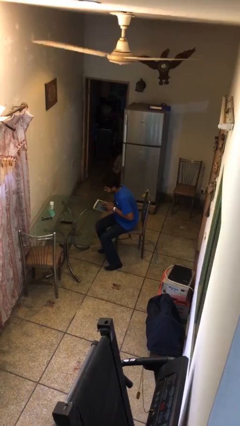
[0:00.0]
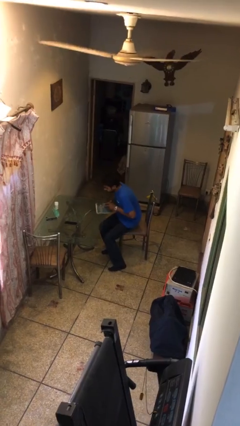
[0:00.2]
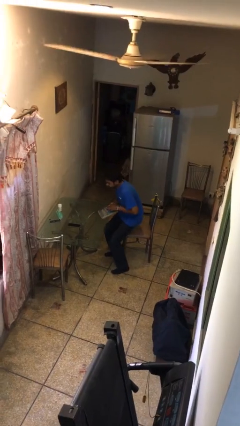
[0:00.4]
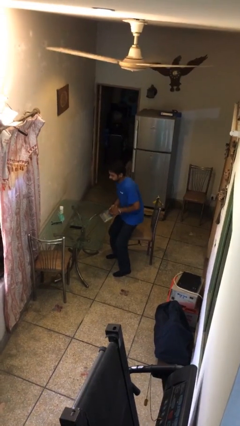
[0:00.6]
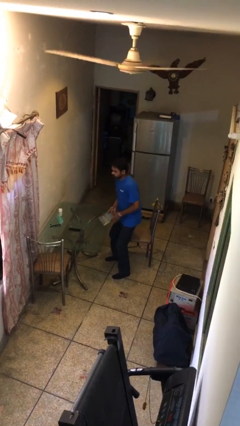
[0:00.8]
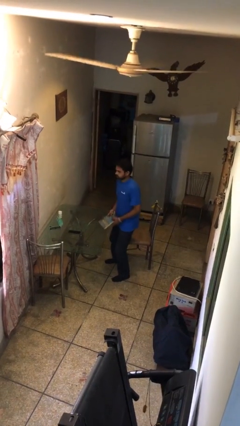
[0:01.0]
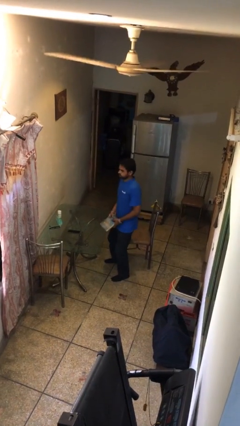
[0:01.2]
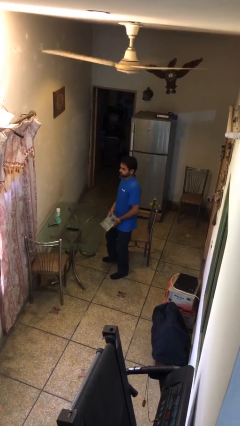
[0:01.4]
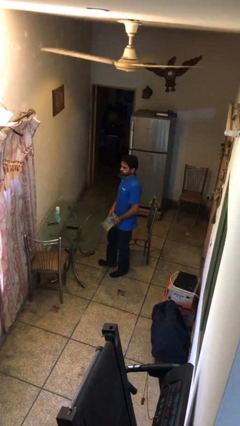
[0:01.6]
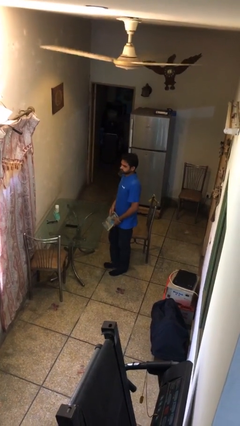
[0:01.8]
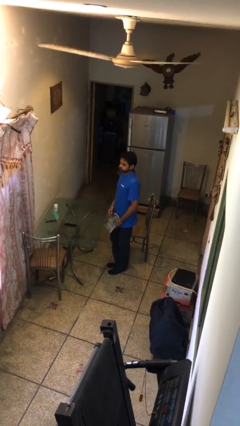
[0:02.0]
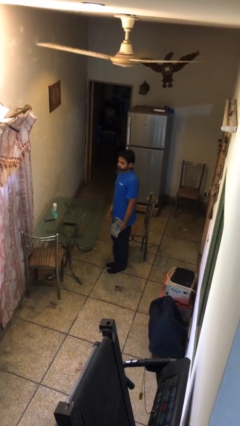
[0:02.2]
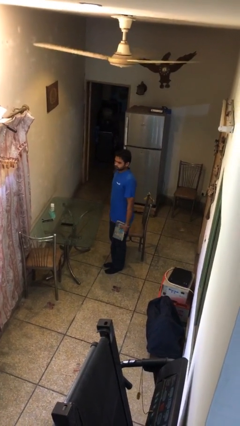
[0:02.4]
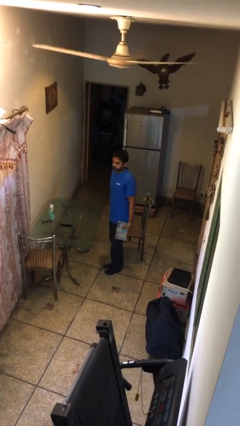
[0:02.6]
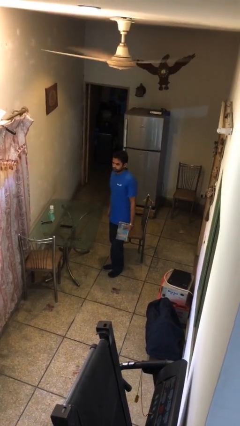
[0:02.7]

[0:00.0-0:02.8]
person stands up

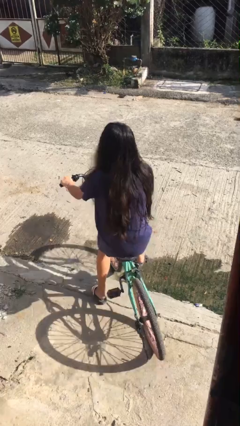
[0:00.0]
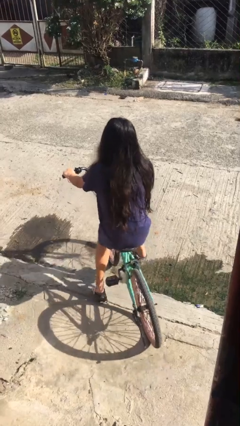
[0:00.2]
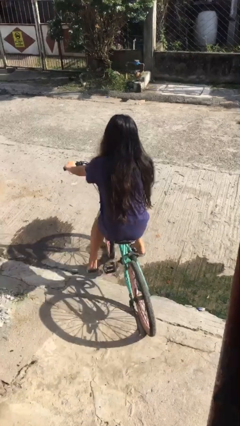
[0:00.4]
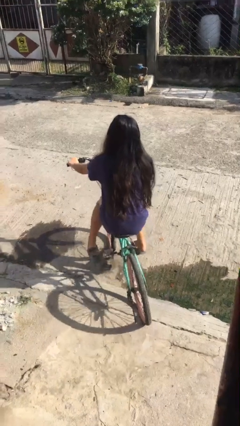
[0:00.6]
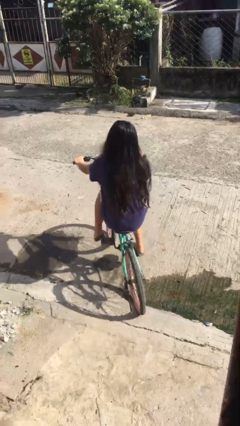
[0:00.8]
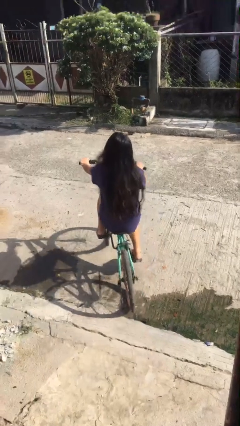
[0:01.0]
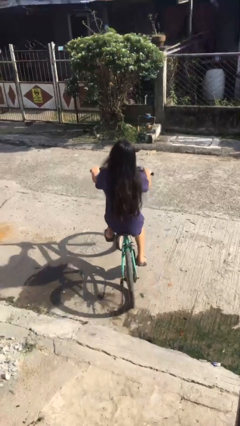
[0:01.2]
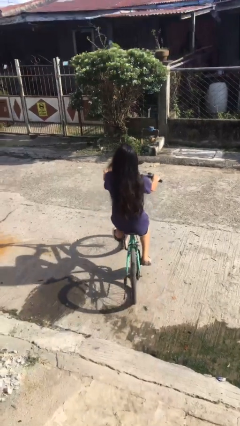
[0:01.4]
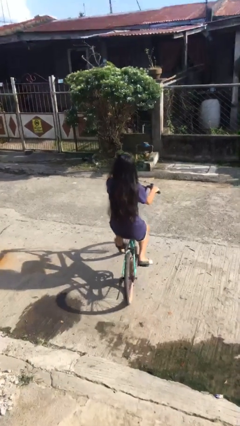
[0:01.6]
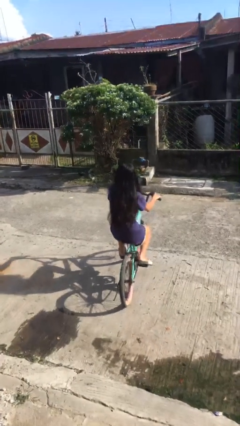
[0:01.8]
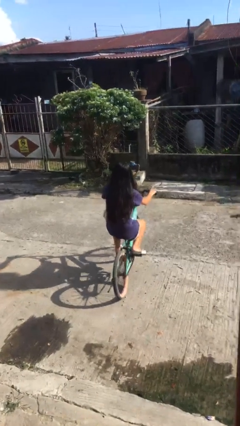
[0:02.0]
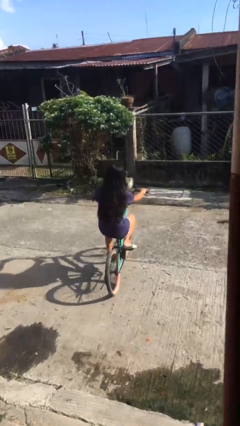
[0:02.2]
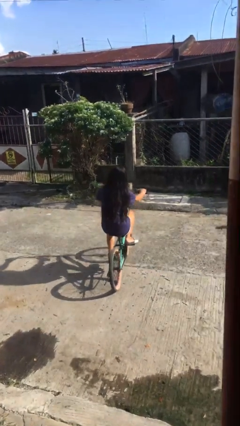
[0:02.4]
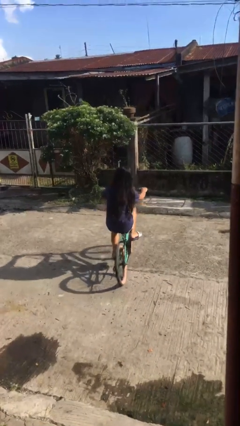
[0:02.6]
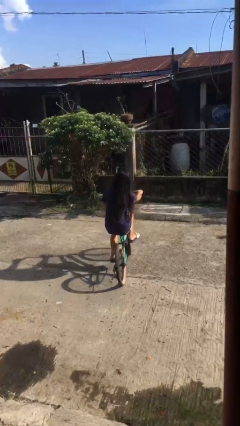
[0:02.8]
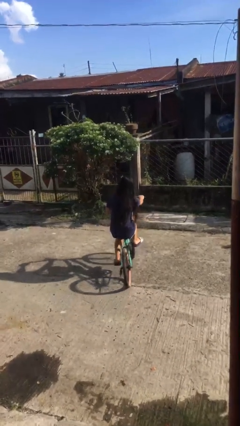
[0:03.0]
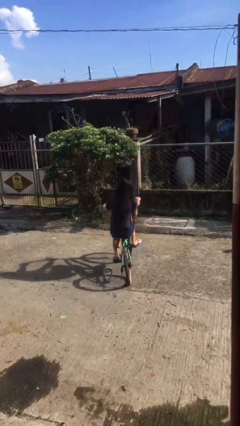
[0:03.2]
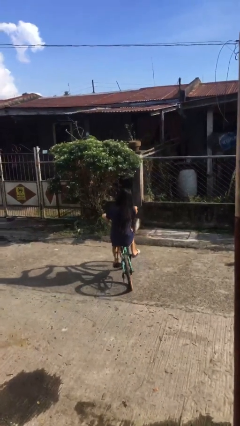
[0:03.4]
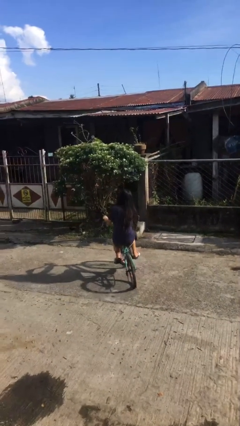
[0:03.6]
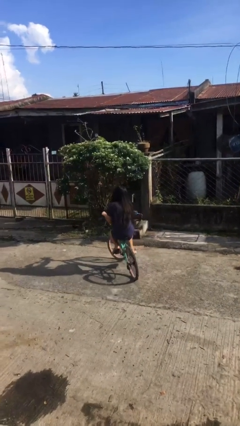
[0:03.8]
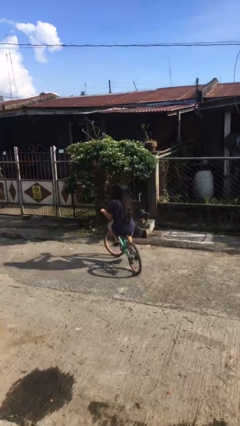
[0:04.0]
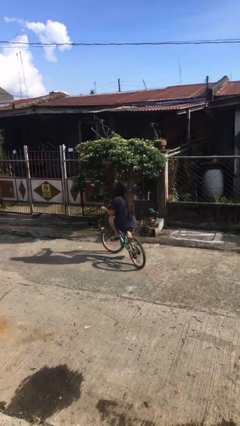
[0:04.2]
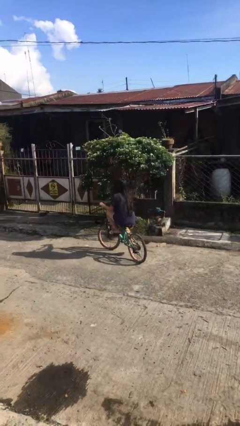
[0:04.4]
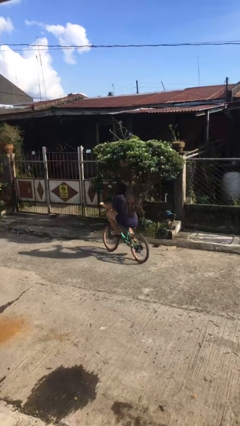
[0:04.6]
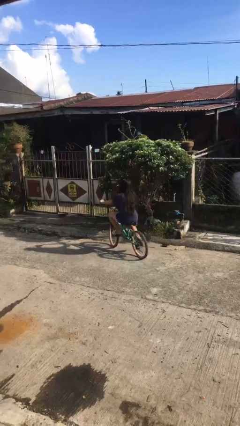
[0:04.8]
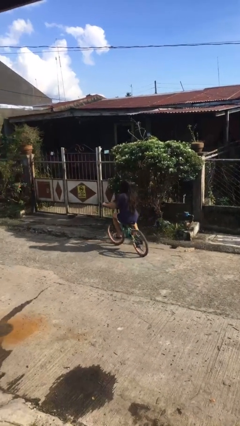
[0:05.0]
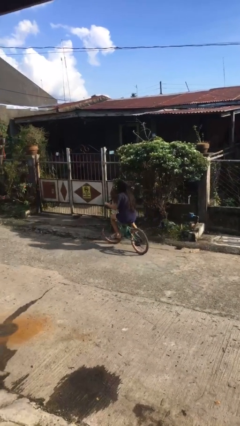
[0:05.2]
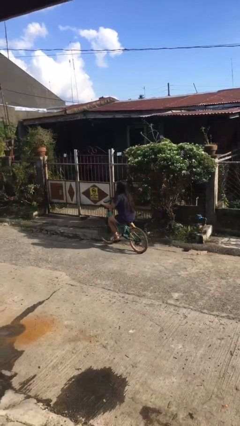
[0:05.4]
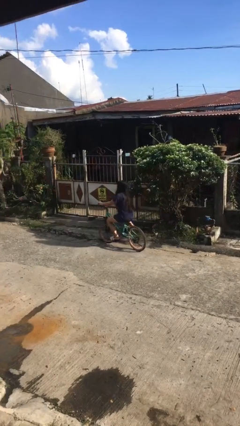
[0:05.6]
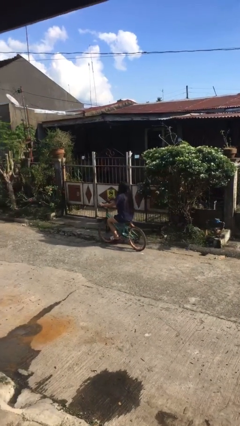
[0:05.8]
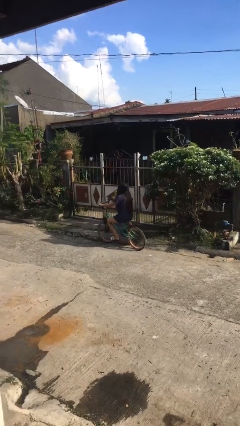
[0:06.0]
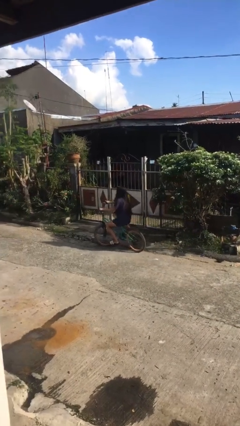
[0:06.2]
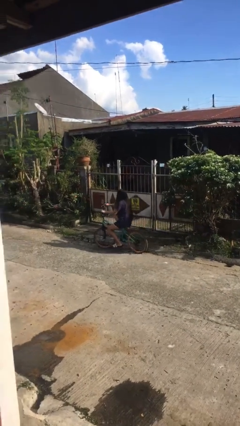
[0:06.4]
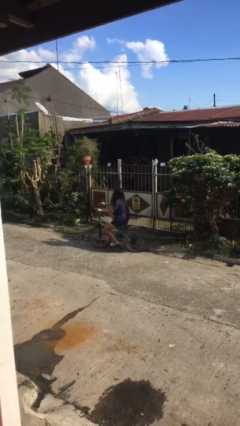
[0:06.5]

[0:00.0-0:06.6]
person rides bicycle

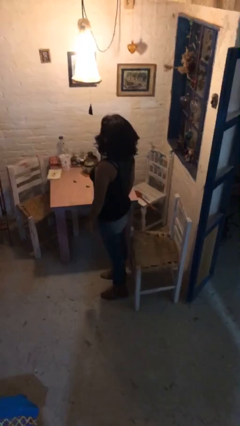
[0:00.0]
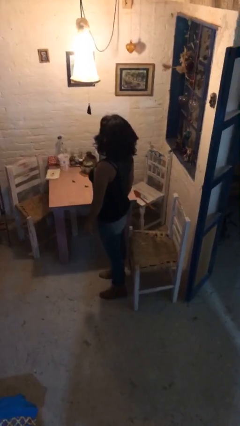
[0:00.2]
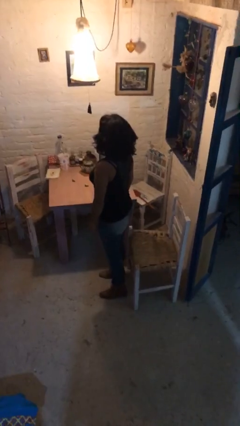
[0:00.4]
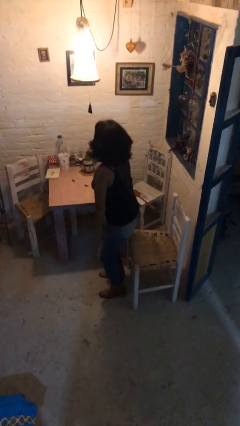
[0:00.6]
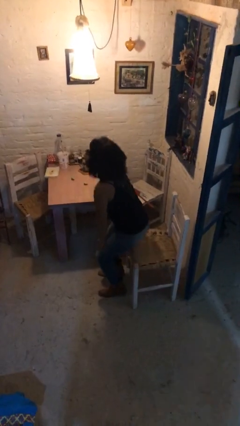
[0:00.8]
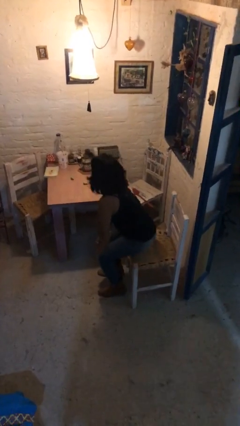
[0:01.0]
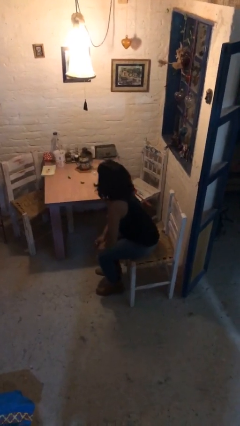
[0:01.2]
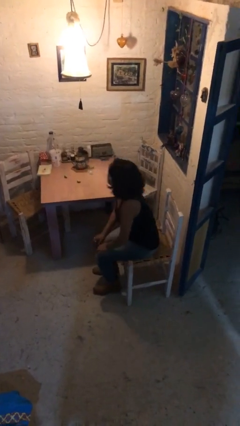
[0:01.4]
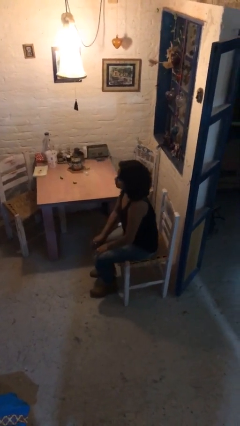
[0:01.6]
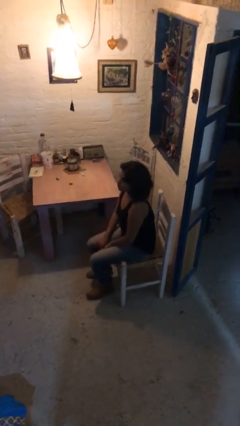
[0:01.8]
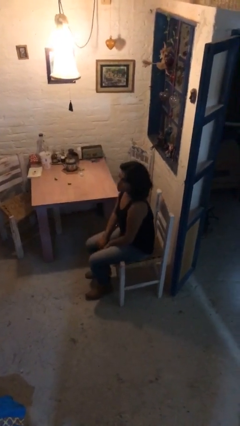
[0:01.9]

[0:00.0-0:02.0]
person sits down

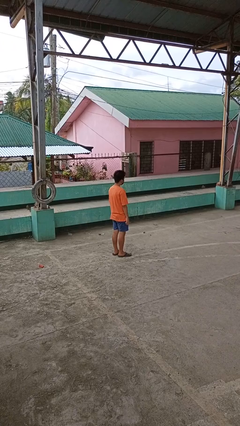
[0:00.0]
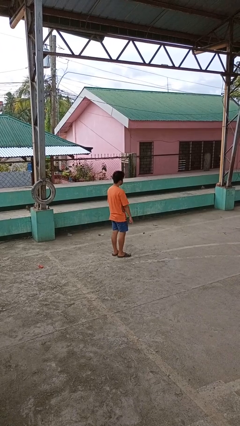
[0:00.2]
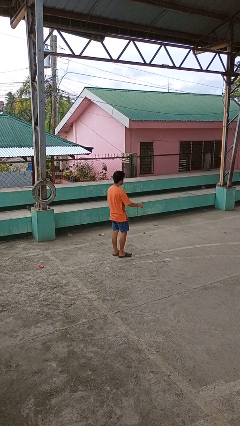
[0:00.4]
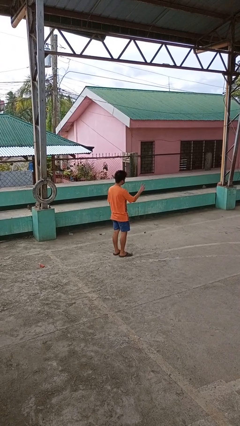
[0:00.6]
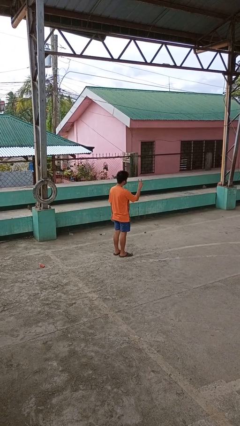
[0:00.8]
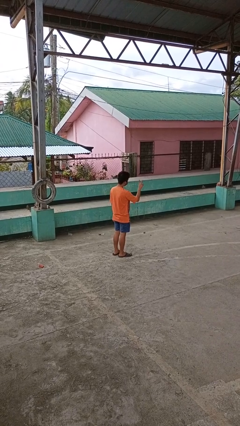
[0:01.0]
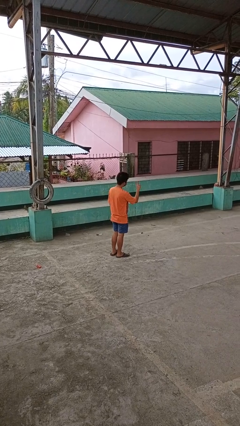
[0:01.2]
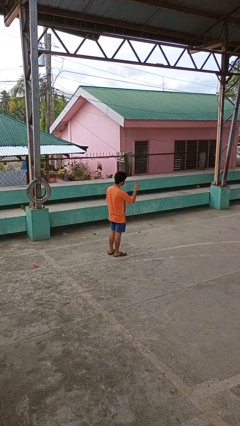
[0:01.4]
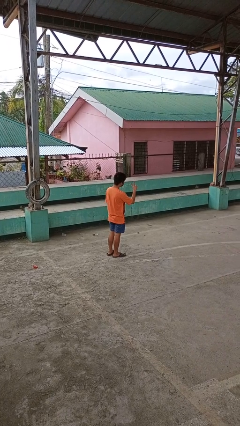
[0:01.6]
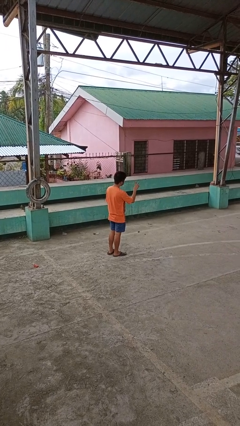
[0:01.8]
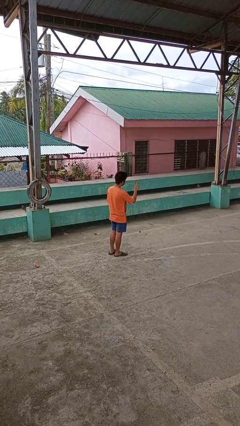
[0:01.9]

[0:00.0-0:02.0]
person gestures peace

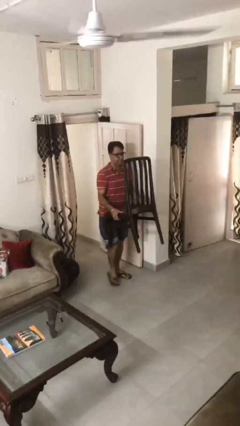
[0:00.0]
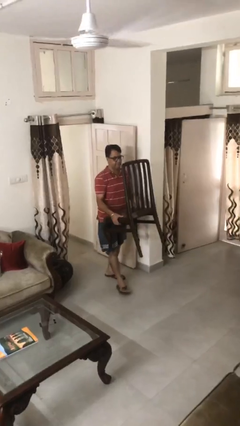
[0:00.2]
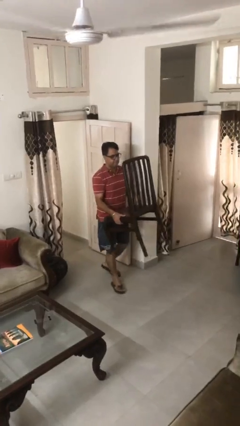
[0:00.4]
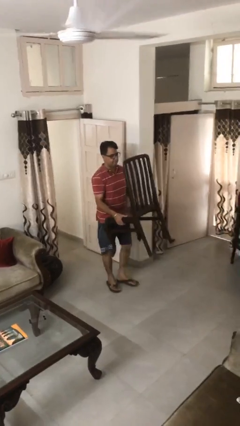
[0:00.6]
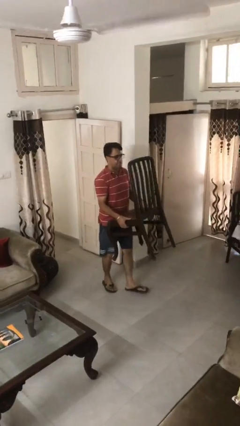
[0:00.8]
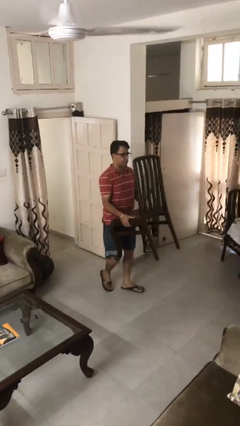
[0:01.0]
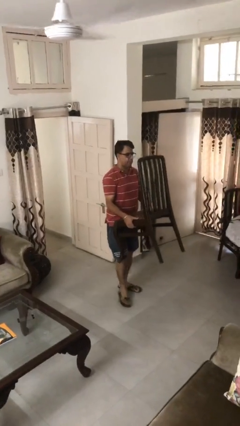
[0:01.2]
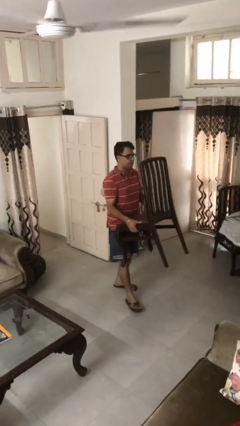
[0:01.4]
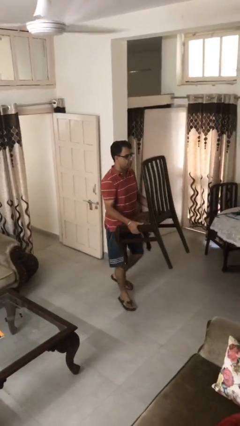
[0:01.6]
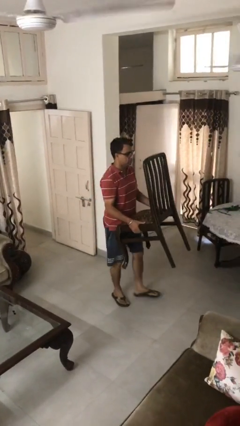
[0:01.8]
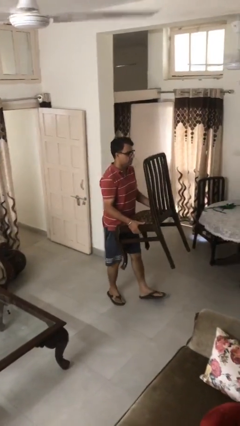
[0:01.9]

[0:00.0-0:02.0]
person carries heavy object

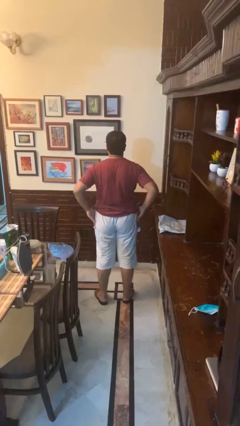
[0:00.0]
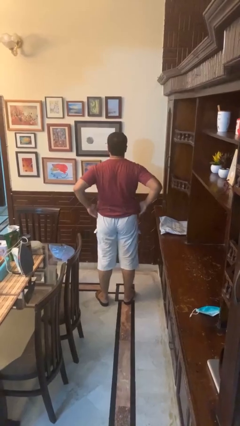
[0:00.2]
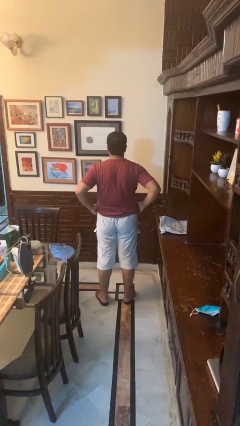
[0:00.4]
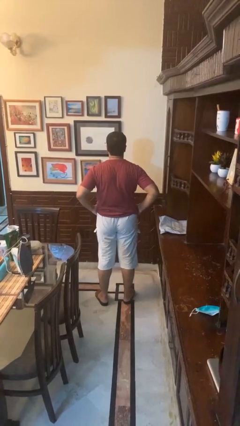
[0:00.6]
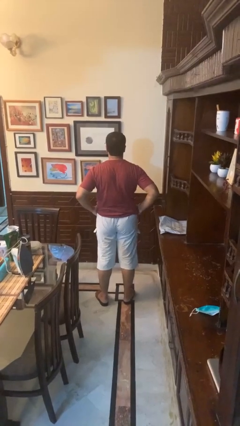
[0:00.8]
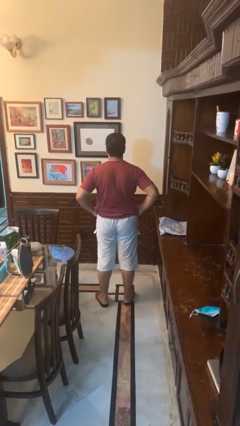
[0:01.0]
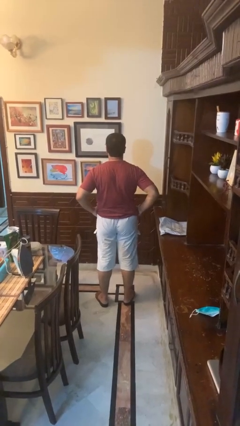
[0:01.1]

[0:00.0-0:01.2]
person puts hands in back pockets

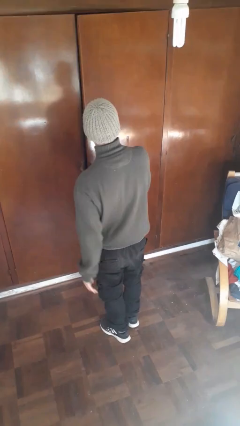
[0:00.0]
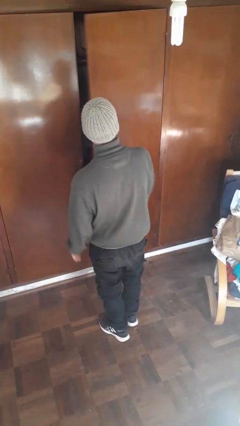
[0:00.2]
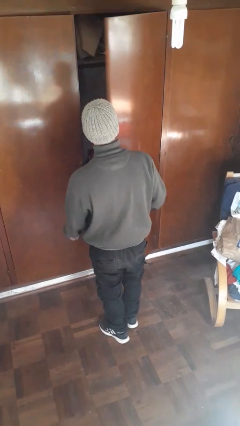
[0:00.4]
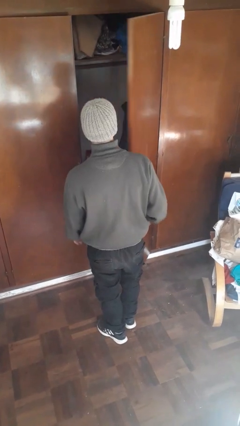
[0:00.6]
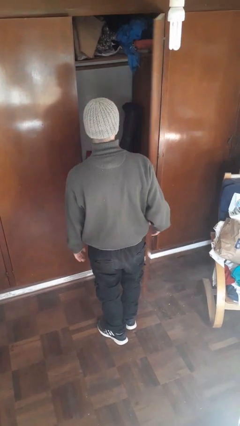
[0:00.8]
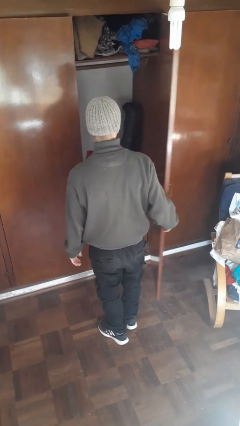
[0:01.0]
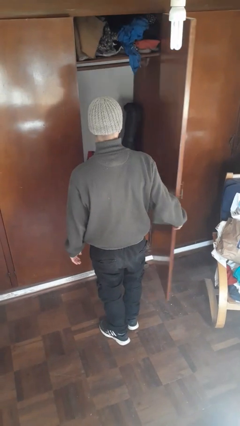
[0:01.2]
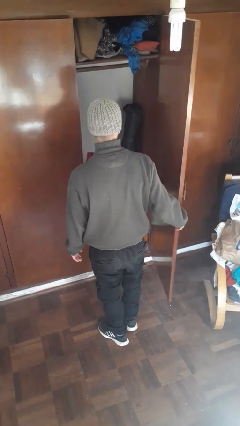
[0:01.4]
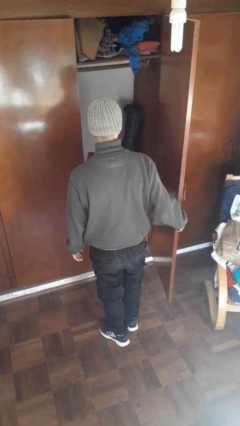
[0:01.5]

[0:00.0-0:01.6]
person opens closet door
